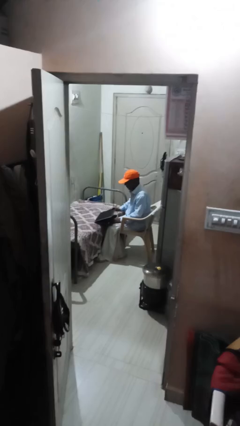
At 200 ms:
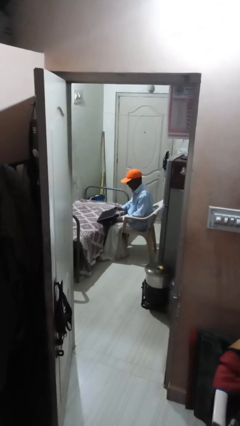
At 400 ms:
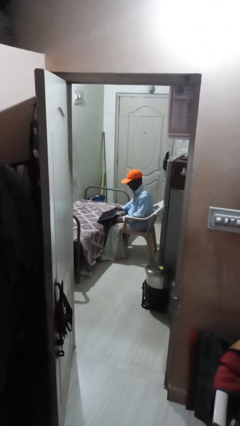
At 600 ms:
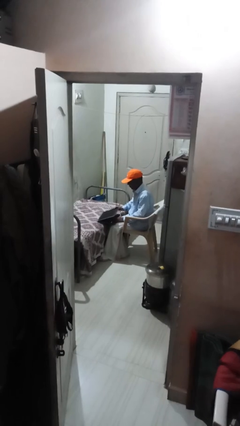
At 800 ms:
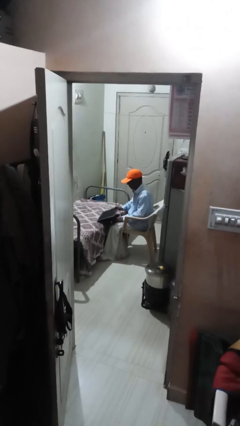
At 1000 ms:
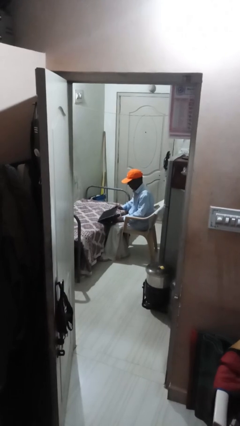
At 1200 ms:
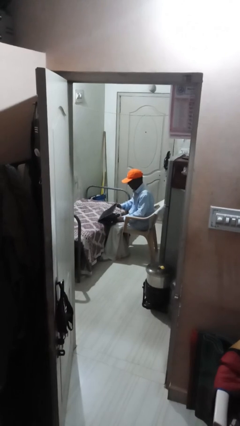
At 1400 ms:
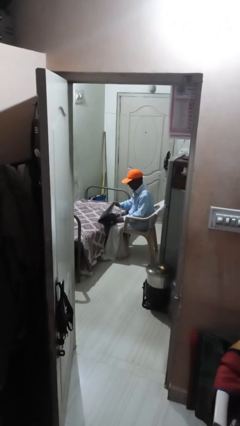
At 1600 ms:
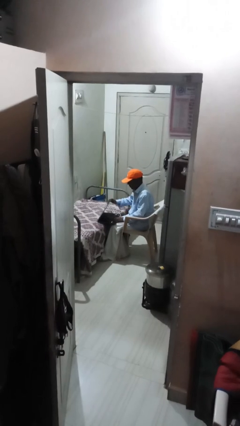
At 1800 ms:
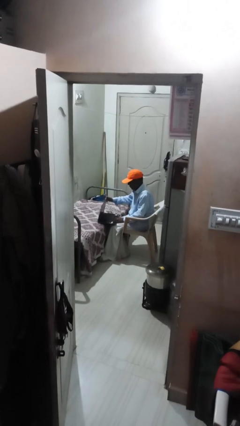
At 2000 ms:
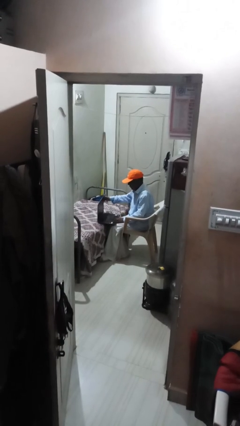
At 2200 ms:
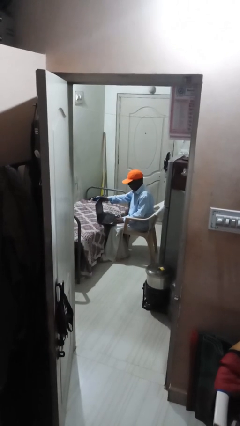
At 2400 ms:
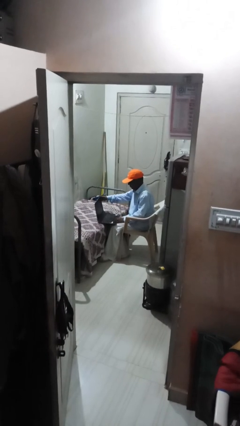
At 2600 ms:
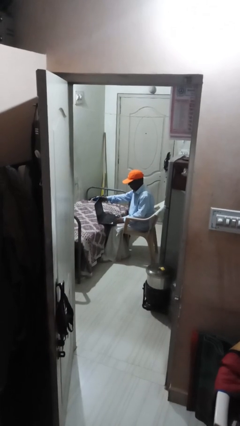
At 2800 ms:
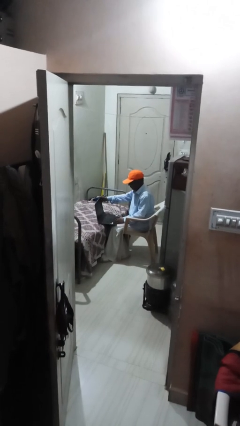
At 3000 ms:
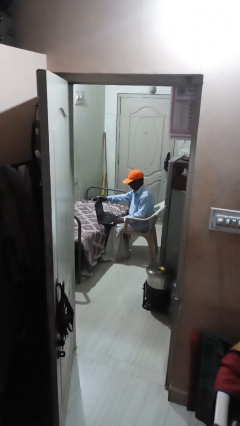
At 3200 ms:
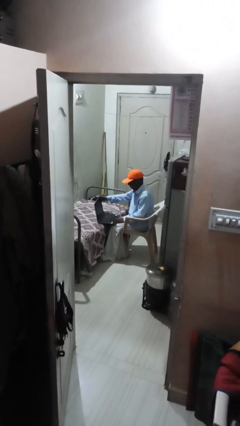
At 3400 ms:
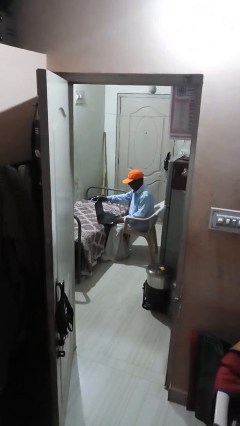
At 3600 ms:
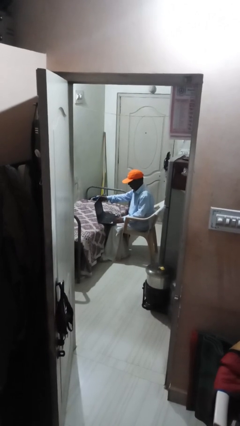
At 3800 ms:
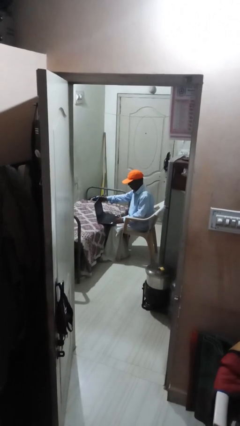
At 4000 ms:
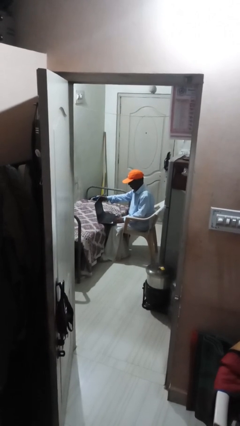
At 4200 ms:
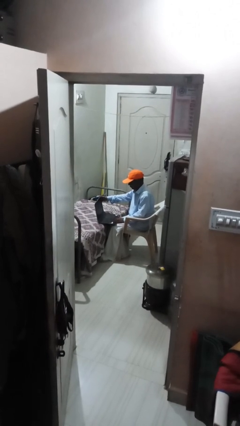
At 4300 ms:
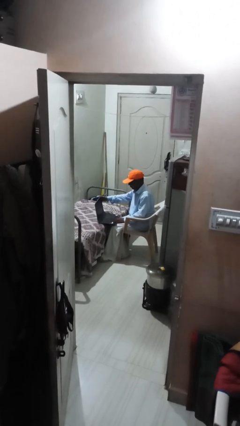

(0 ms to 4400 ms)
person interacts with laptop

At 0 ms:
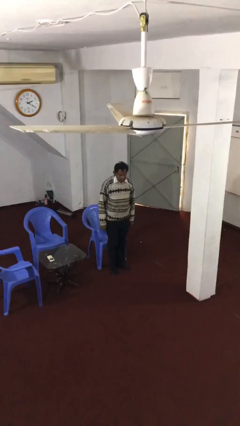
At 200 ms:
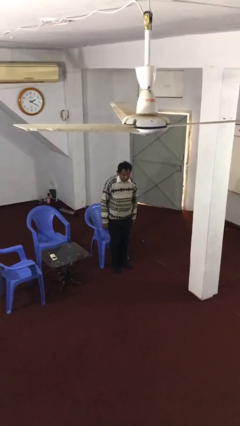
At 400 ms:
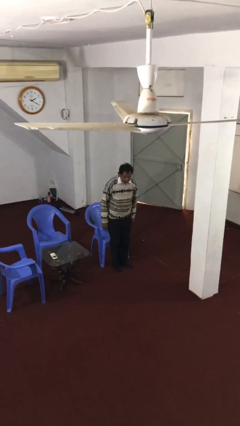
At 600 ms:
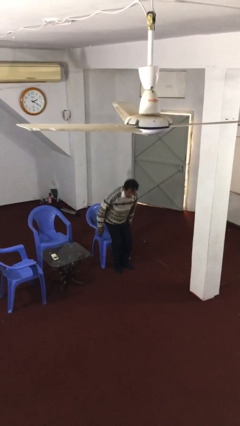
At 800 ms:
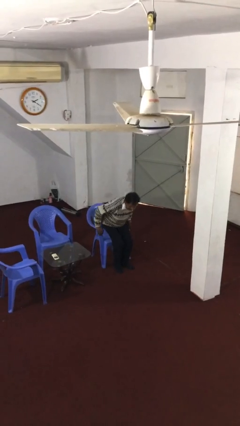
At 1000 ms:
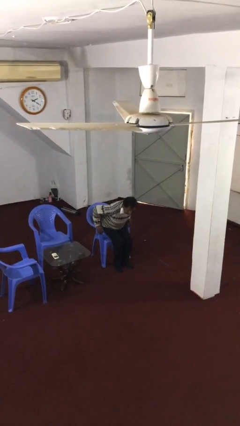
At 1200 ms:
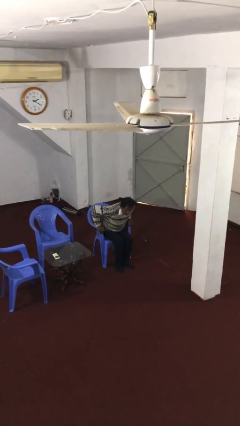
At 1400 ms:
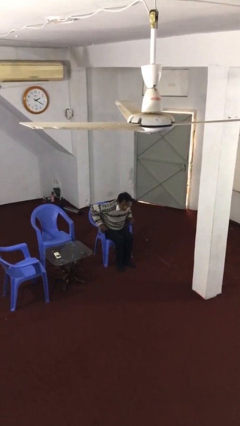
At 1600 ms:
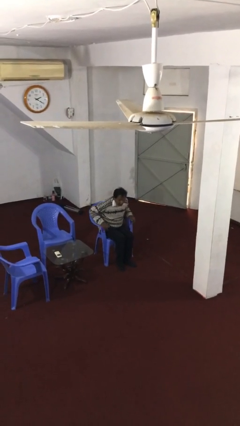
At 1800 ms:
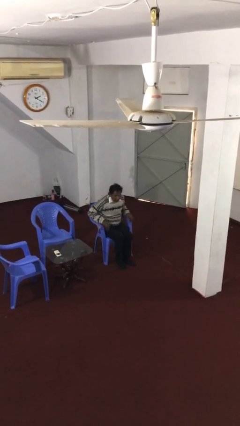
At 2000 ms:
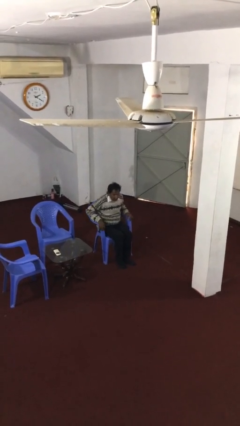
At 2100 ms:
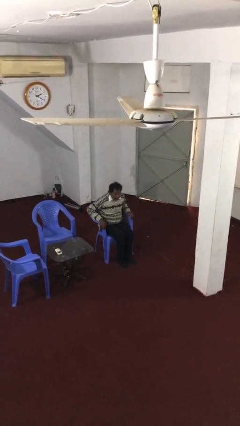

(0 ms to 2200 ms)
person sits down

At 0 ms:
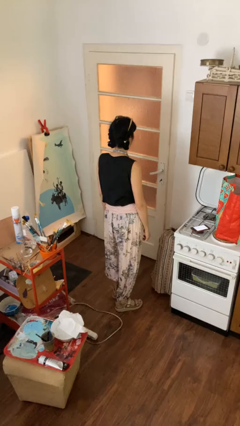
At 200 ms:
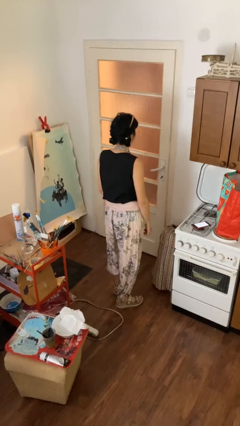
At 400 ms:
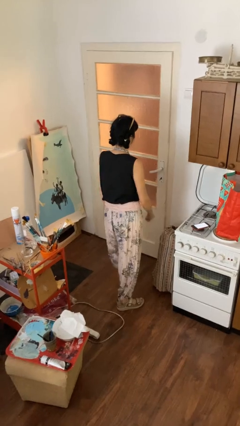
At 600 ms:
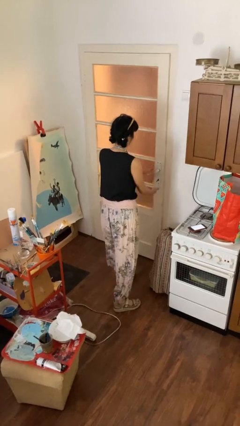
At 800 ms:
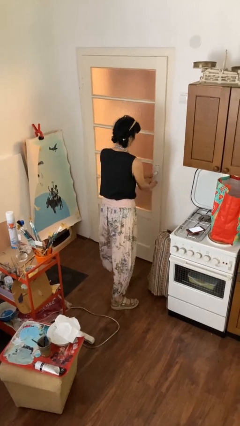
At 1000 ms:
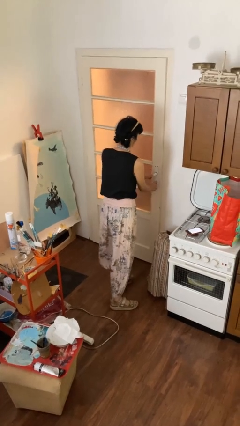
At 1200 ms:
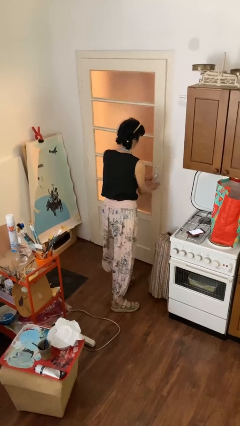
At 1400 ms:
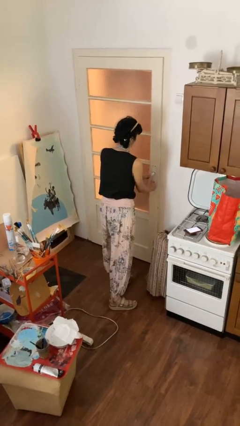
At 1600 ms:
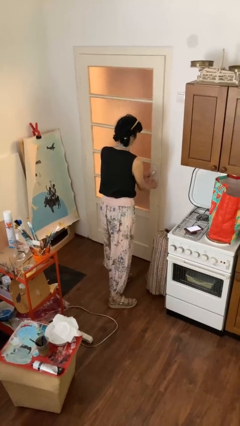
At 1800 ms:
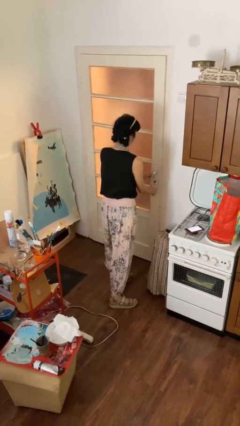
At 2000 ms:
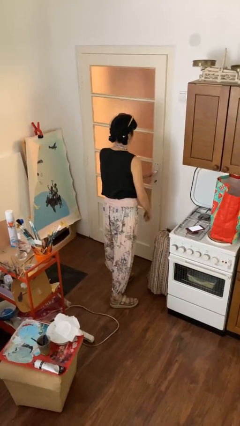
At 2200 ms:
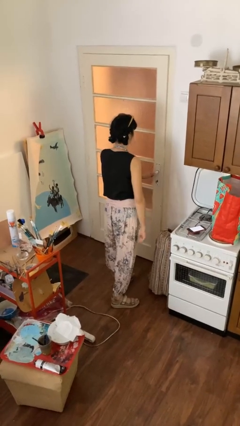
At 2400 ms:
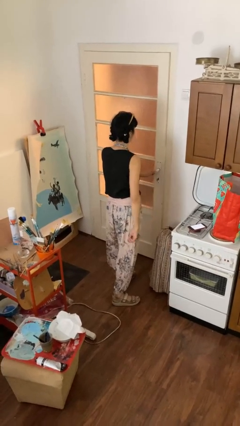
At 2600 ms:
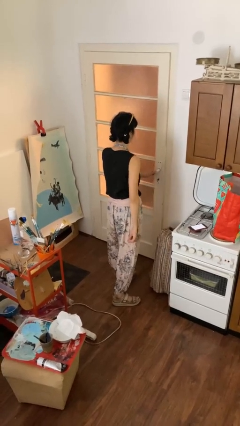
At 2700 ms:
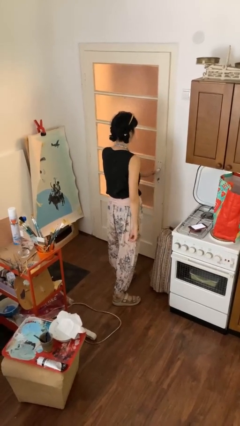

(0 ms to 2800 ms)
person unlocks door with keys

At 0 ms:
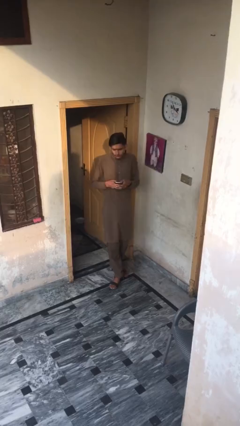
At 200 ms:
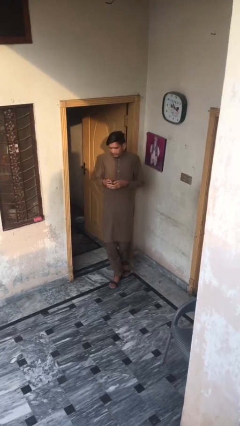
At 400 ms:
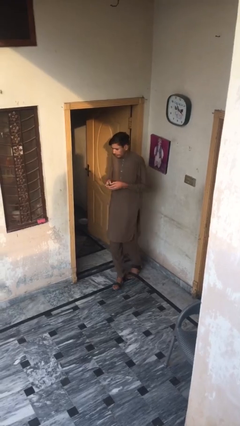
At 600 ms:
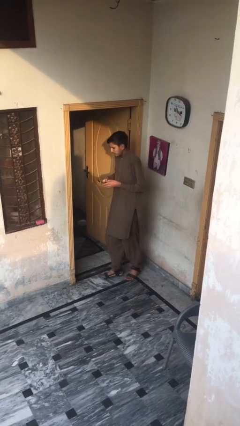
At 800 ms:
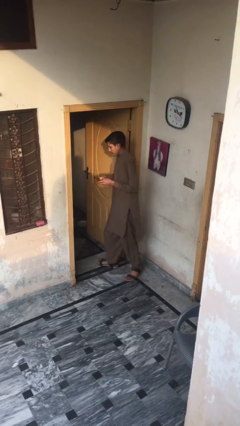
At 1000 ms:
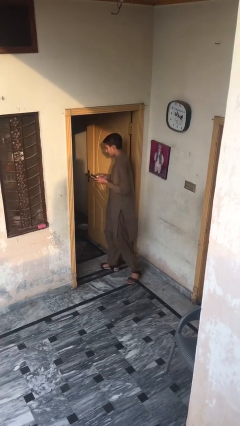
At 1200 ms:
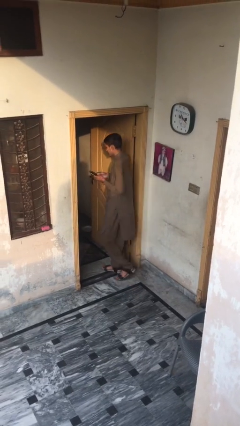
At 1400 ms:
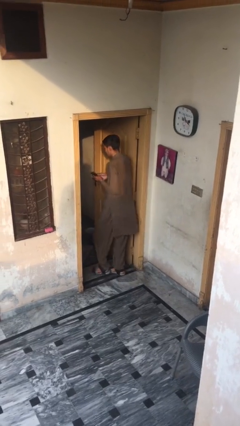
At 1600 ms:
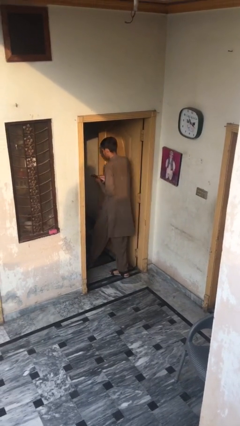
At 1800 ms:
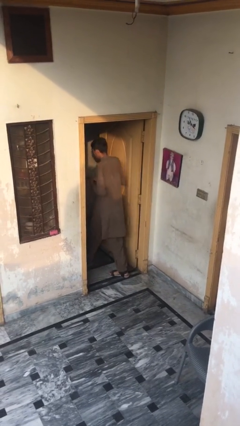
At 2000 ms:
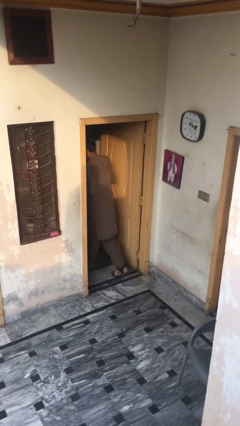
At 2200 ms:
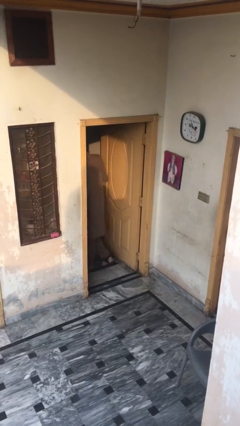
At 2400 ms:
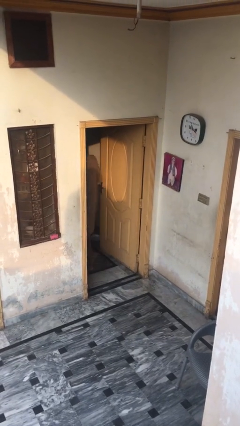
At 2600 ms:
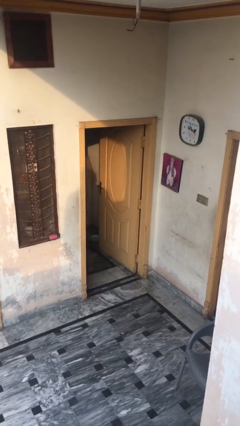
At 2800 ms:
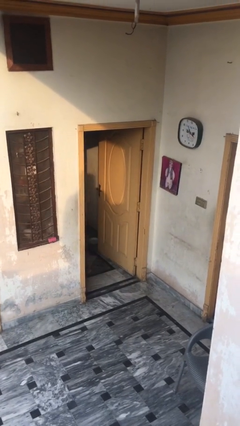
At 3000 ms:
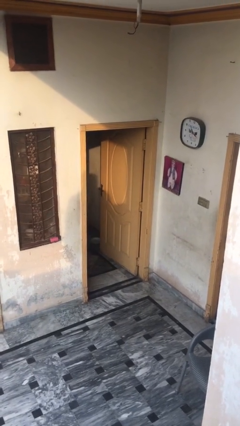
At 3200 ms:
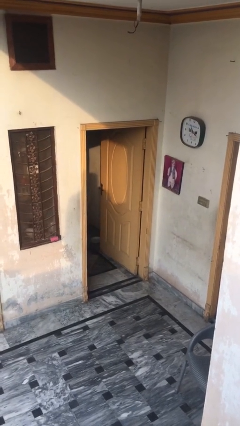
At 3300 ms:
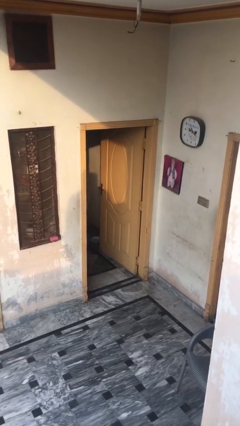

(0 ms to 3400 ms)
person exits scene through structure

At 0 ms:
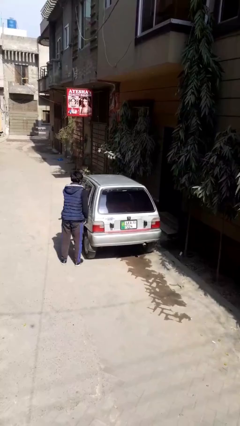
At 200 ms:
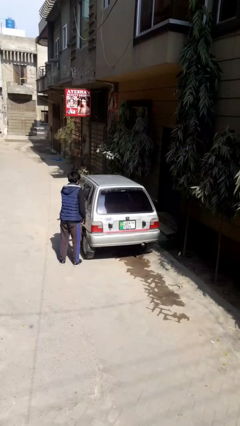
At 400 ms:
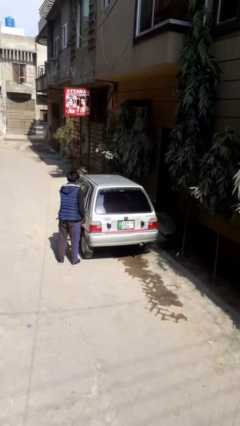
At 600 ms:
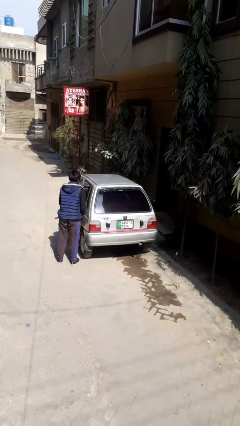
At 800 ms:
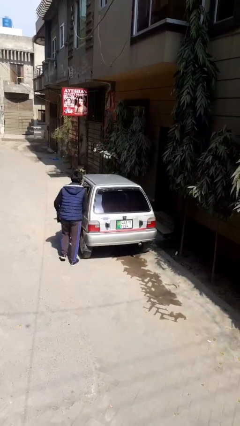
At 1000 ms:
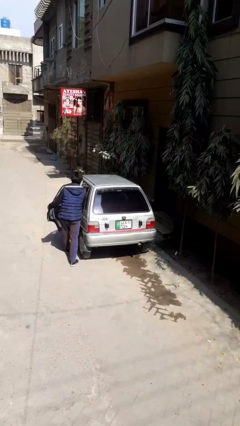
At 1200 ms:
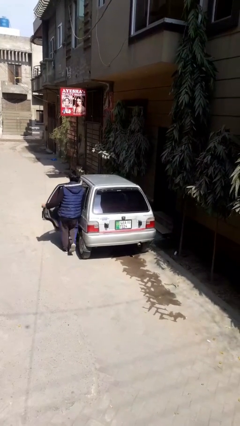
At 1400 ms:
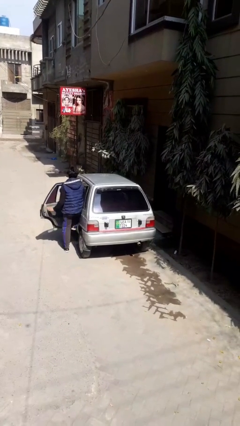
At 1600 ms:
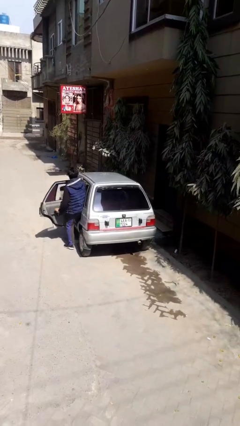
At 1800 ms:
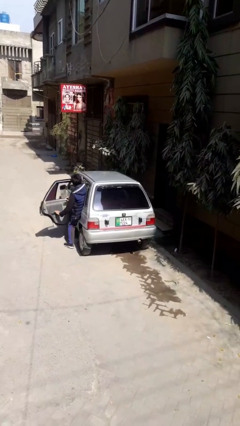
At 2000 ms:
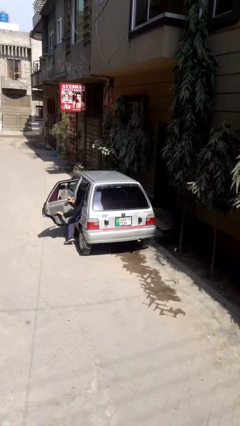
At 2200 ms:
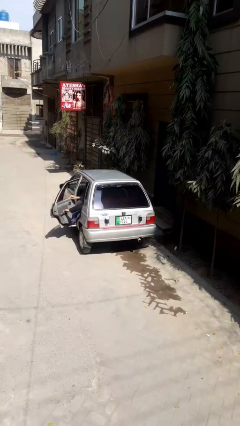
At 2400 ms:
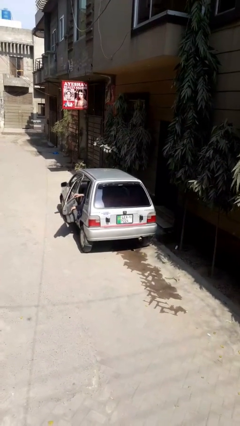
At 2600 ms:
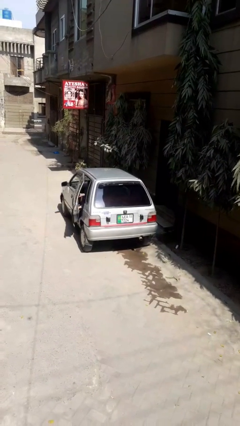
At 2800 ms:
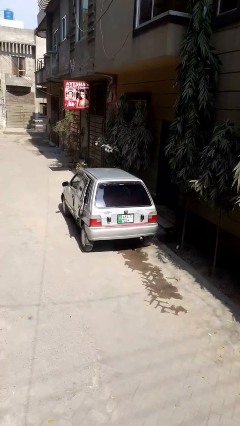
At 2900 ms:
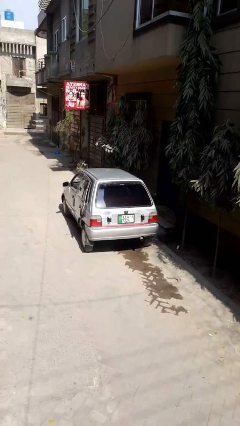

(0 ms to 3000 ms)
car picks up person

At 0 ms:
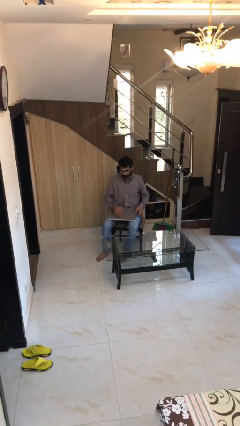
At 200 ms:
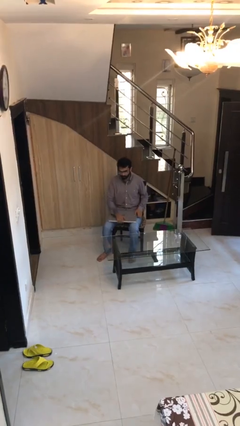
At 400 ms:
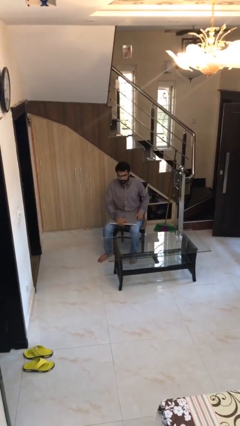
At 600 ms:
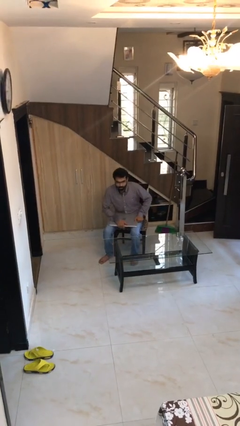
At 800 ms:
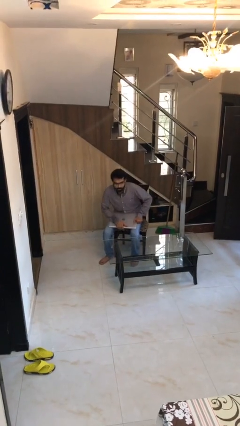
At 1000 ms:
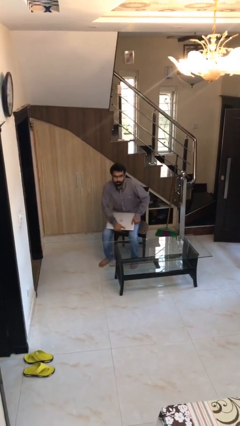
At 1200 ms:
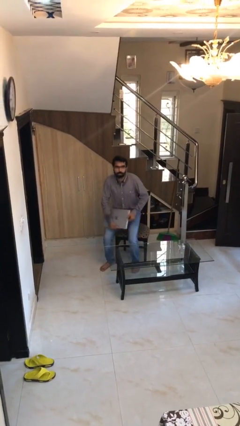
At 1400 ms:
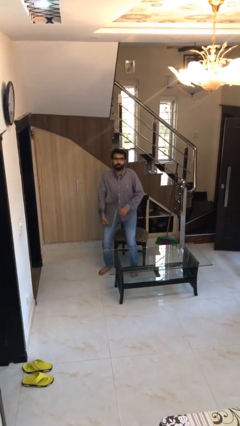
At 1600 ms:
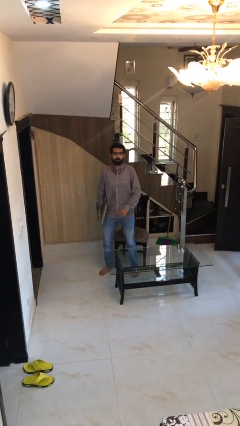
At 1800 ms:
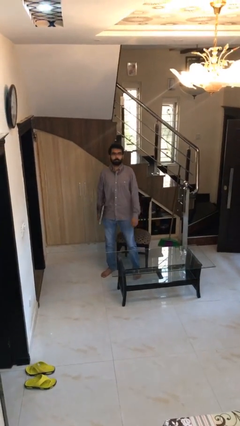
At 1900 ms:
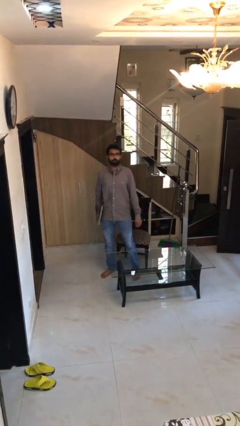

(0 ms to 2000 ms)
person stands up
